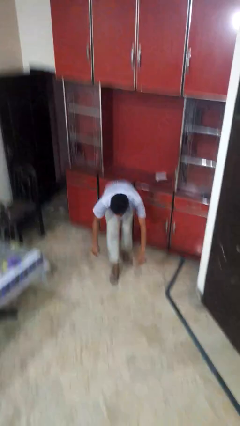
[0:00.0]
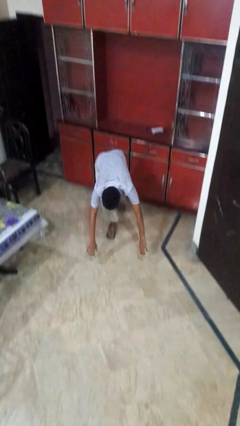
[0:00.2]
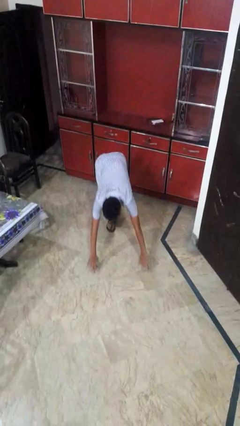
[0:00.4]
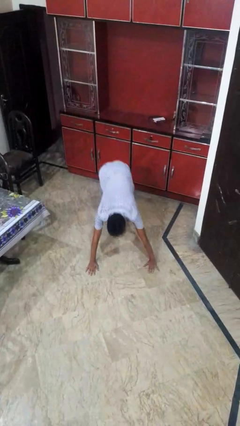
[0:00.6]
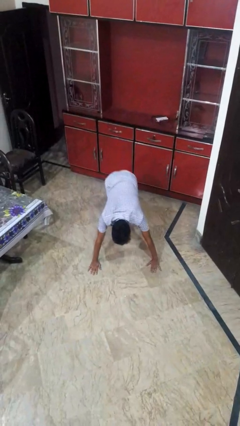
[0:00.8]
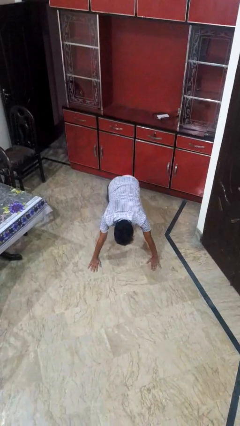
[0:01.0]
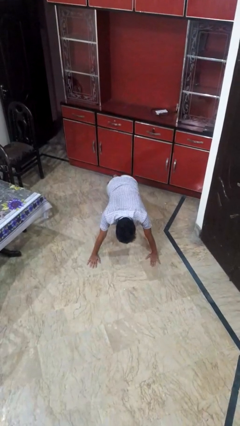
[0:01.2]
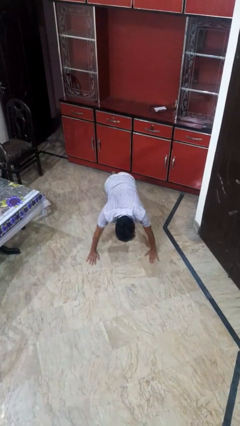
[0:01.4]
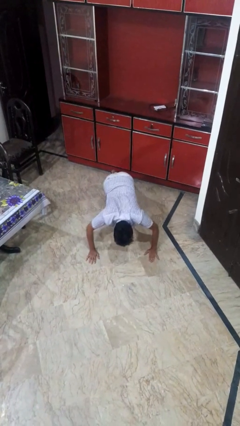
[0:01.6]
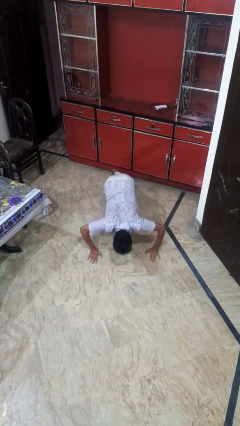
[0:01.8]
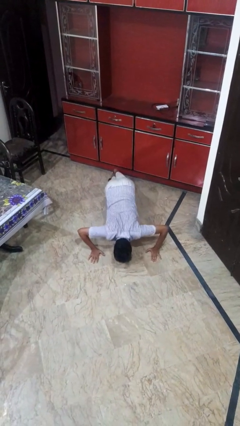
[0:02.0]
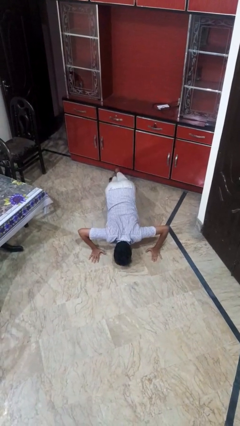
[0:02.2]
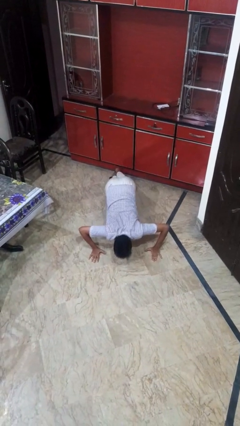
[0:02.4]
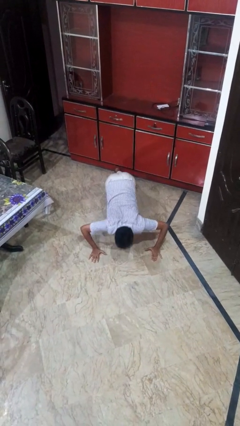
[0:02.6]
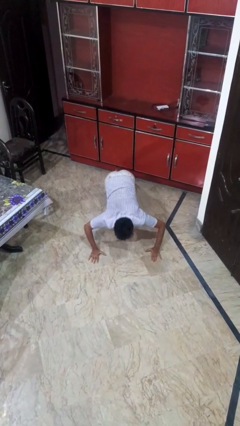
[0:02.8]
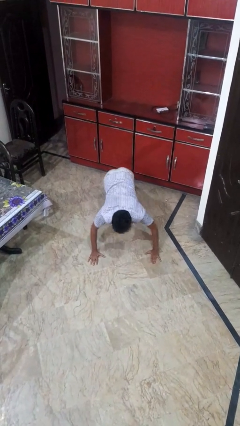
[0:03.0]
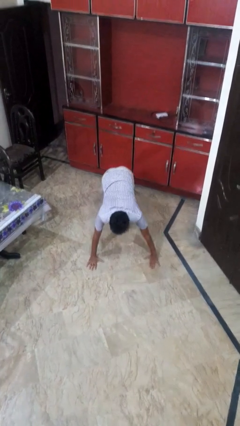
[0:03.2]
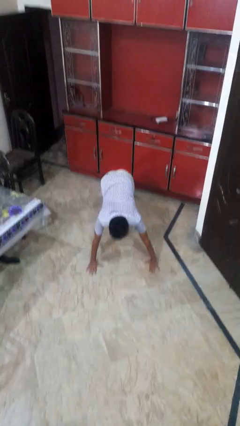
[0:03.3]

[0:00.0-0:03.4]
person exercises with pushup

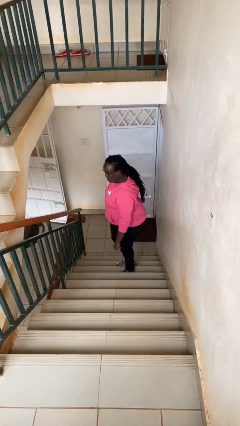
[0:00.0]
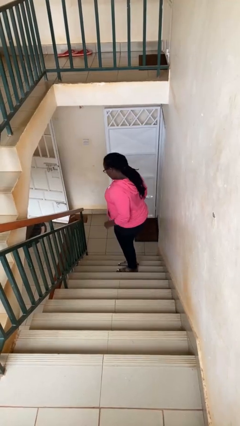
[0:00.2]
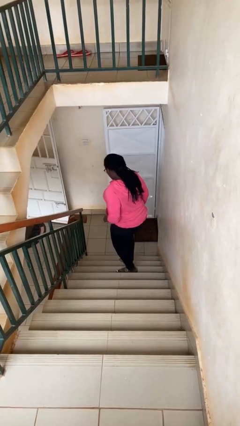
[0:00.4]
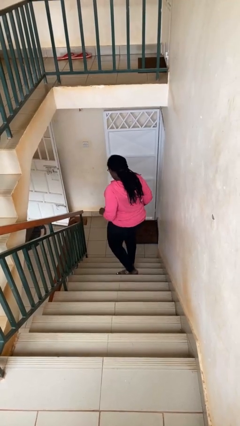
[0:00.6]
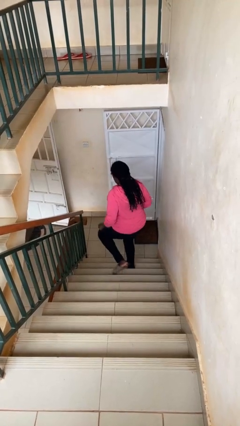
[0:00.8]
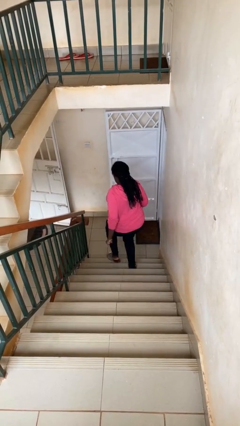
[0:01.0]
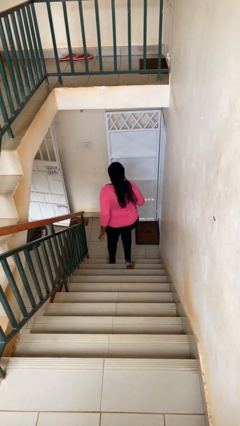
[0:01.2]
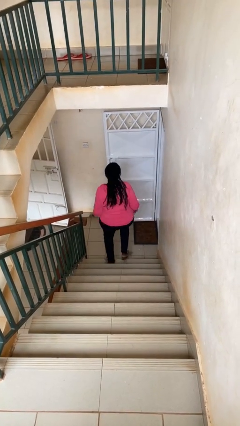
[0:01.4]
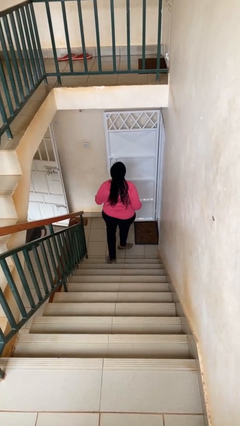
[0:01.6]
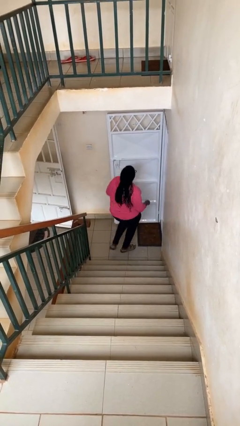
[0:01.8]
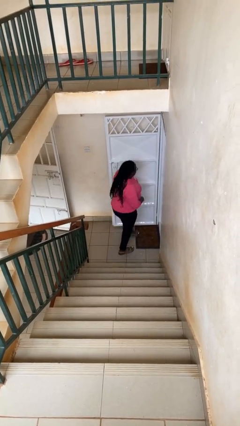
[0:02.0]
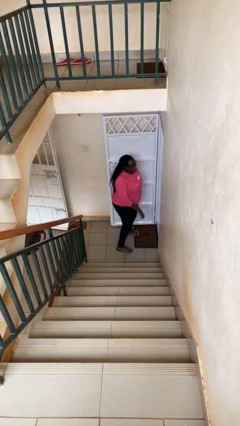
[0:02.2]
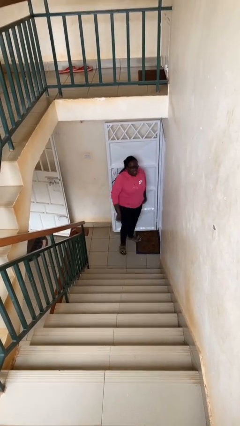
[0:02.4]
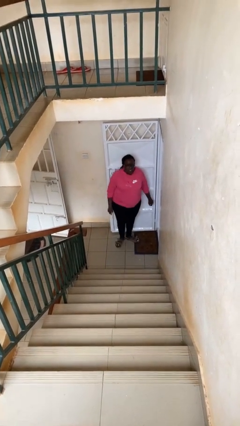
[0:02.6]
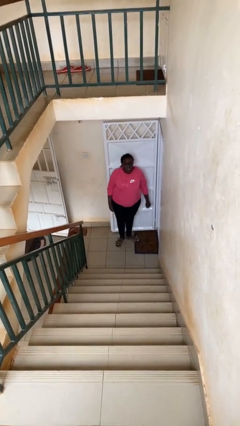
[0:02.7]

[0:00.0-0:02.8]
person climbs down stairs

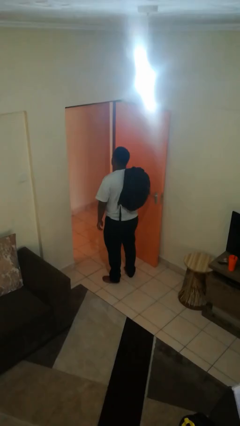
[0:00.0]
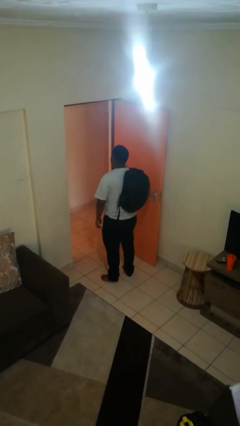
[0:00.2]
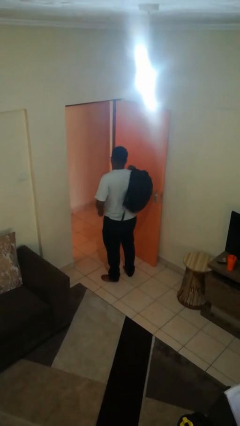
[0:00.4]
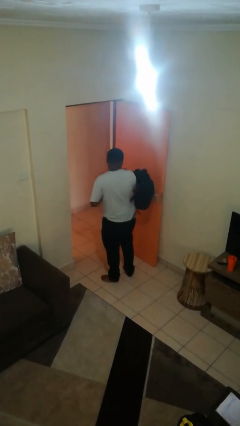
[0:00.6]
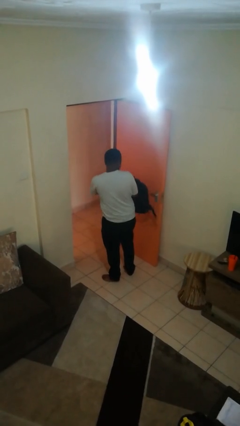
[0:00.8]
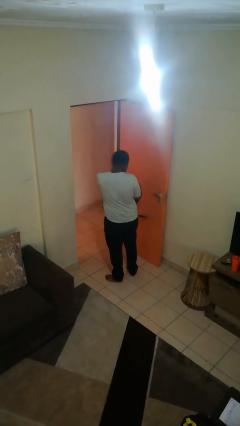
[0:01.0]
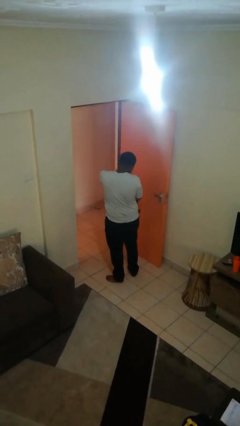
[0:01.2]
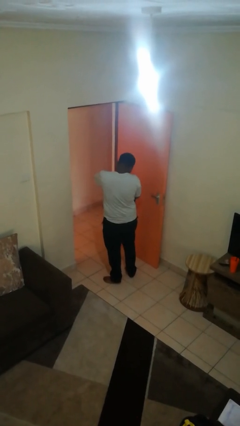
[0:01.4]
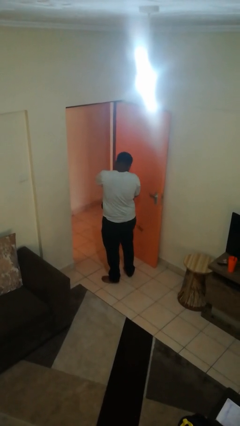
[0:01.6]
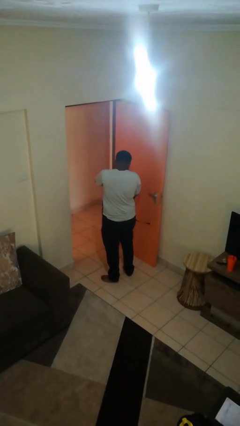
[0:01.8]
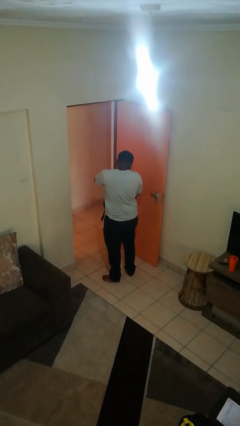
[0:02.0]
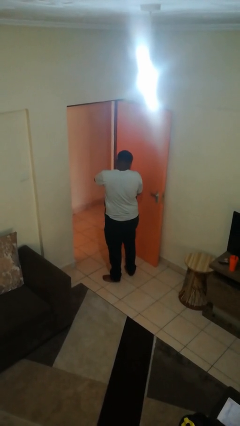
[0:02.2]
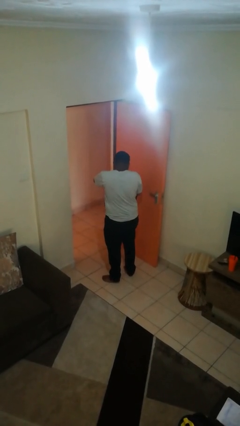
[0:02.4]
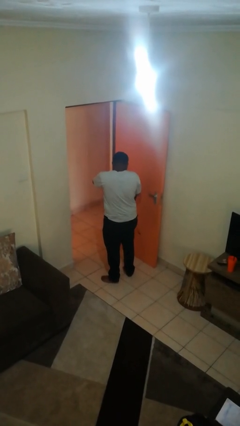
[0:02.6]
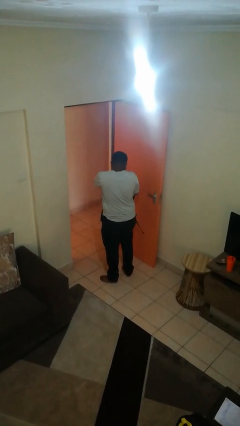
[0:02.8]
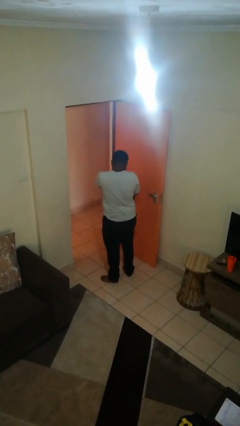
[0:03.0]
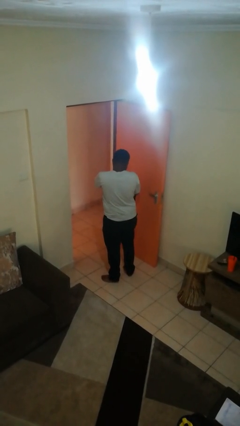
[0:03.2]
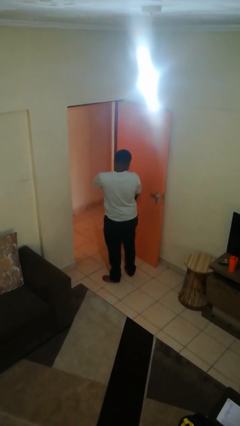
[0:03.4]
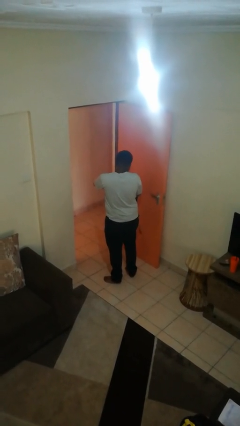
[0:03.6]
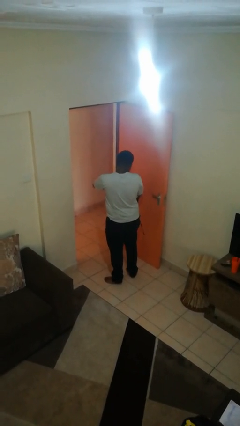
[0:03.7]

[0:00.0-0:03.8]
person searches in backpack

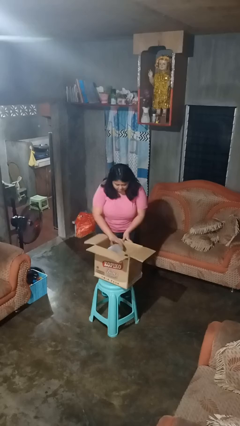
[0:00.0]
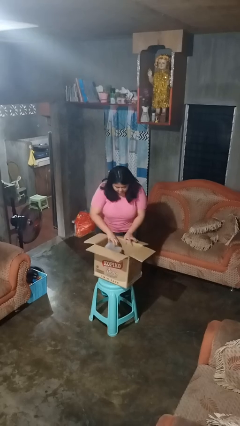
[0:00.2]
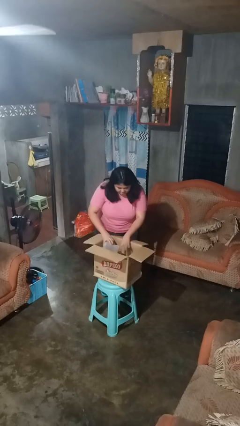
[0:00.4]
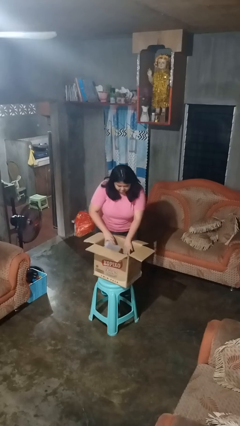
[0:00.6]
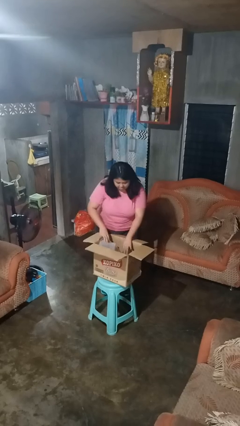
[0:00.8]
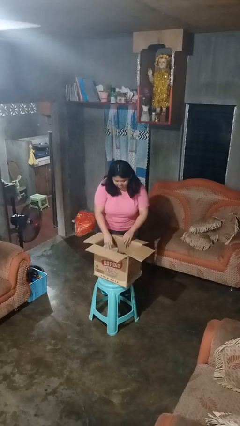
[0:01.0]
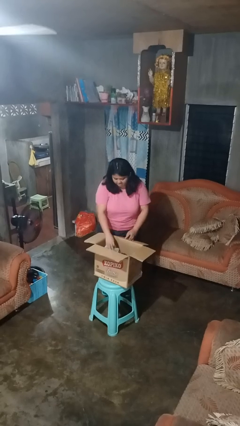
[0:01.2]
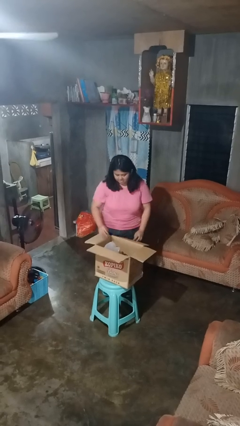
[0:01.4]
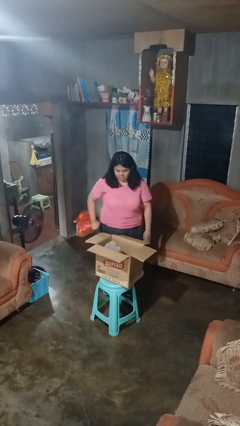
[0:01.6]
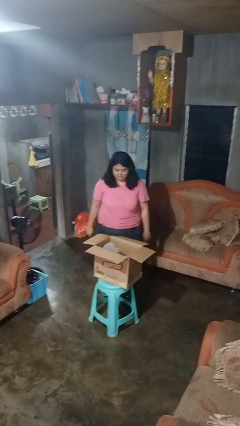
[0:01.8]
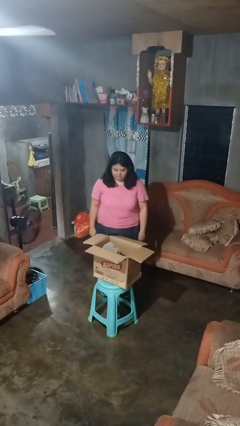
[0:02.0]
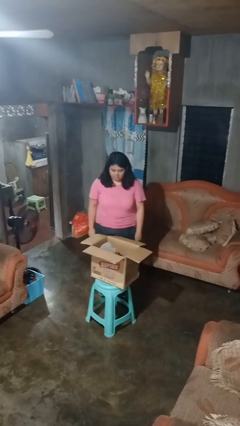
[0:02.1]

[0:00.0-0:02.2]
person searches in box

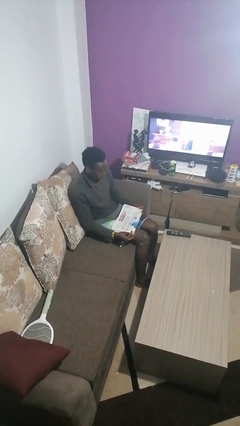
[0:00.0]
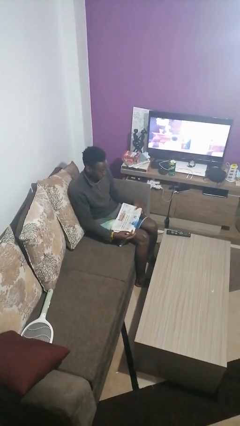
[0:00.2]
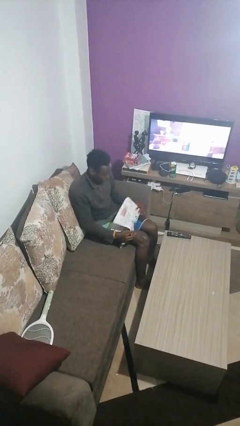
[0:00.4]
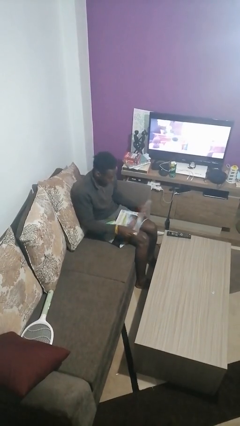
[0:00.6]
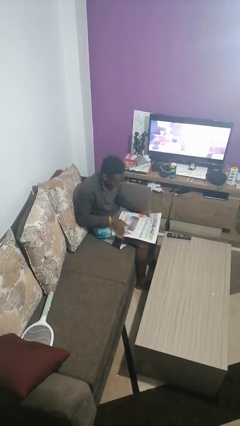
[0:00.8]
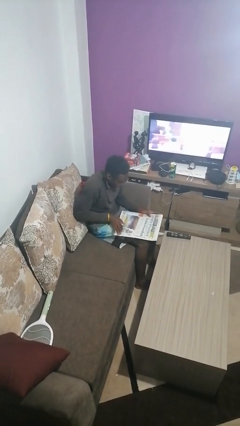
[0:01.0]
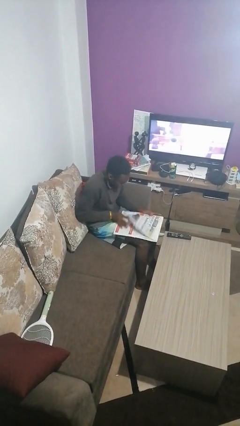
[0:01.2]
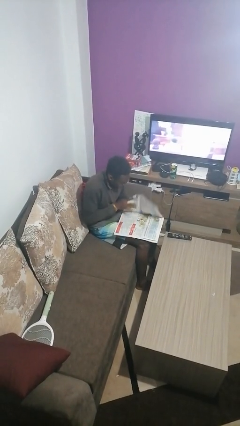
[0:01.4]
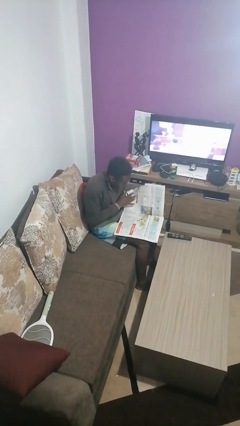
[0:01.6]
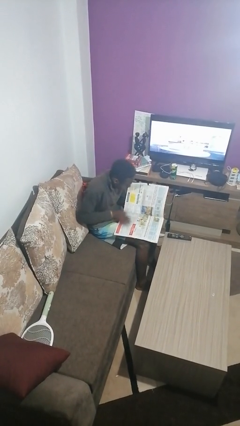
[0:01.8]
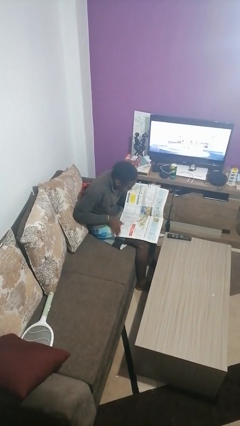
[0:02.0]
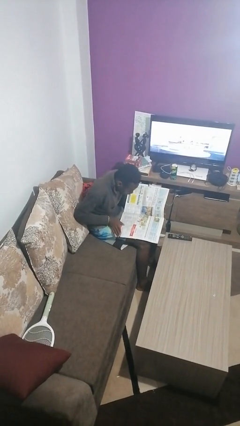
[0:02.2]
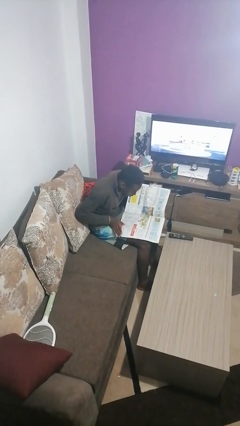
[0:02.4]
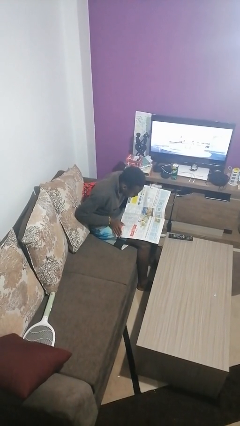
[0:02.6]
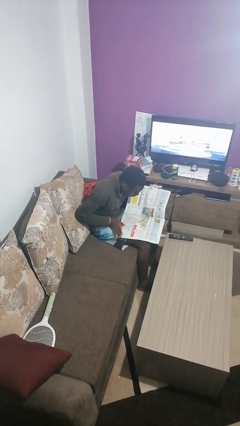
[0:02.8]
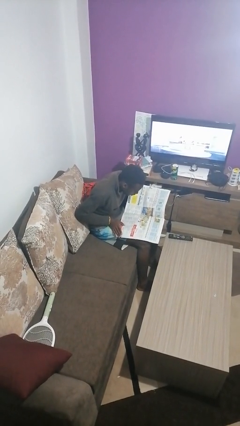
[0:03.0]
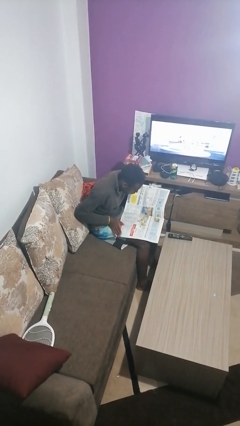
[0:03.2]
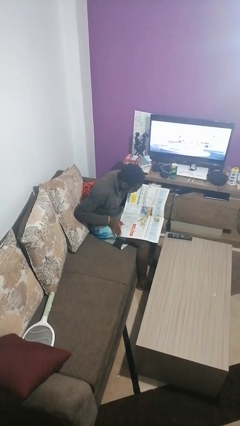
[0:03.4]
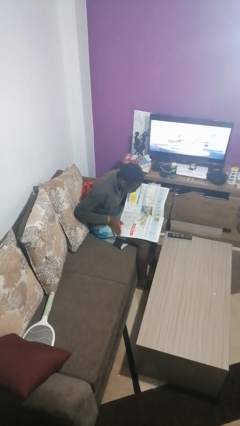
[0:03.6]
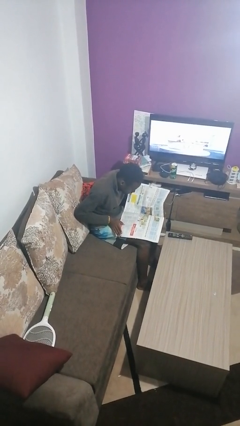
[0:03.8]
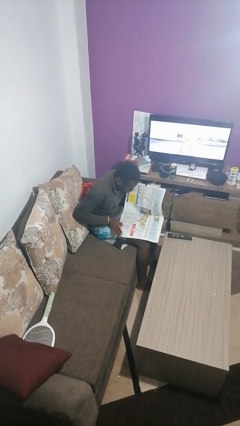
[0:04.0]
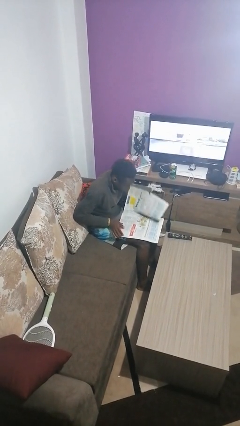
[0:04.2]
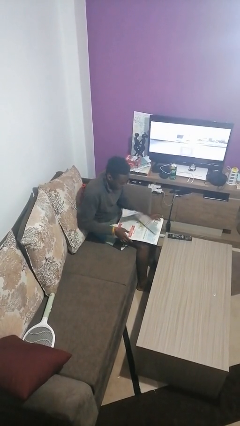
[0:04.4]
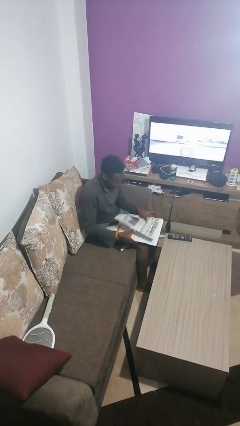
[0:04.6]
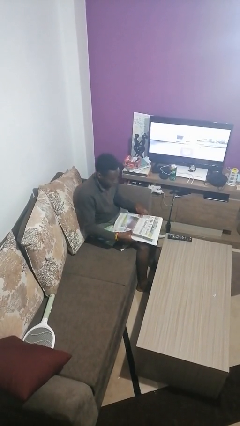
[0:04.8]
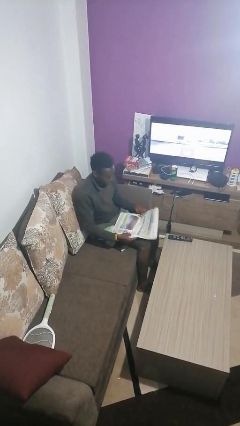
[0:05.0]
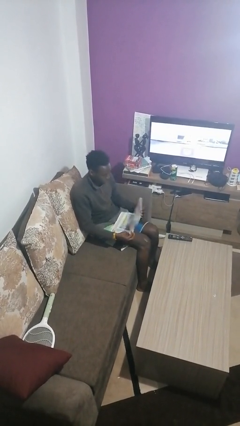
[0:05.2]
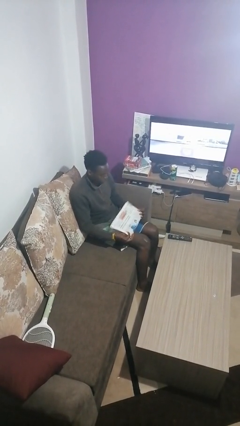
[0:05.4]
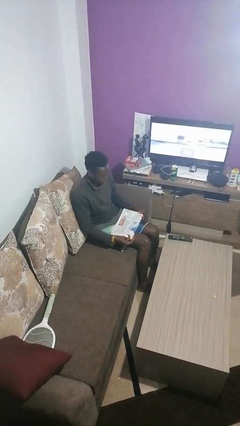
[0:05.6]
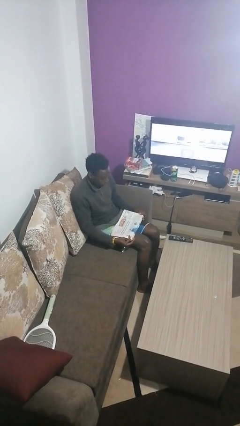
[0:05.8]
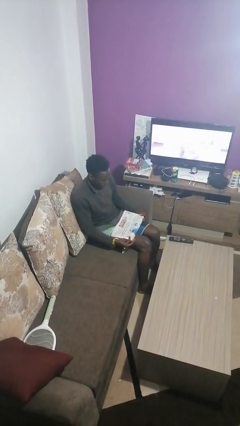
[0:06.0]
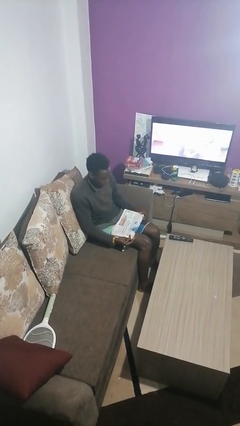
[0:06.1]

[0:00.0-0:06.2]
person reads newspaper
